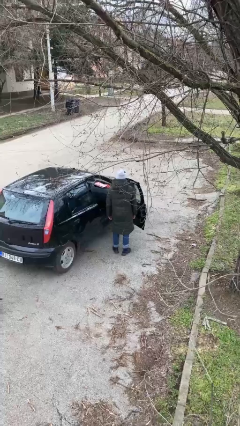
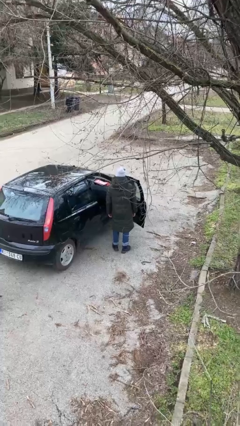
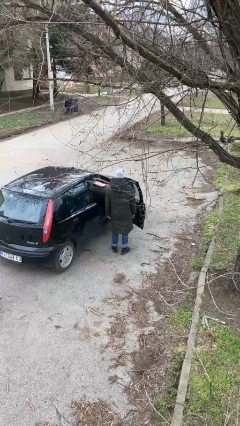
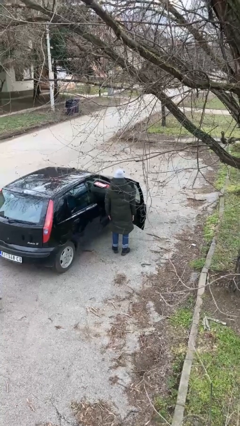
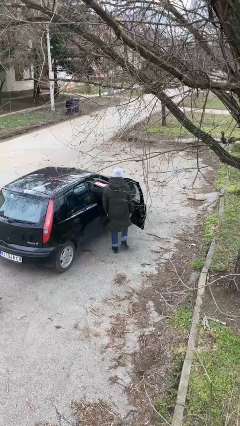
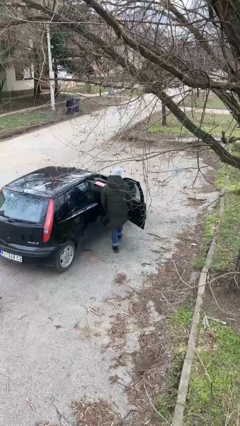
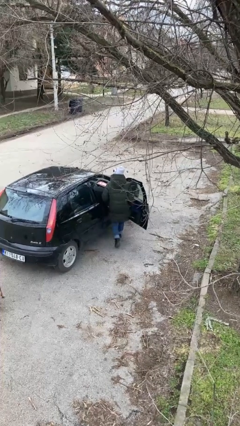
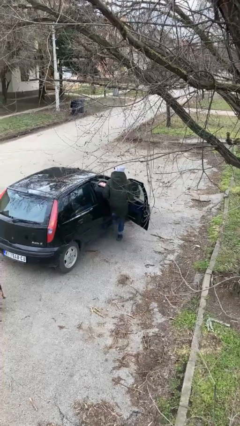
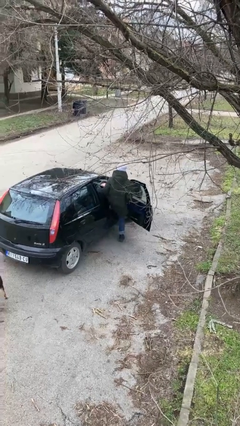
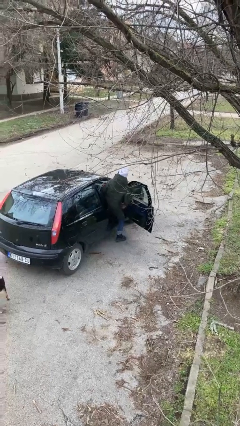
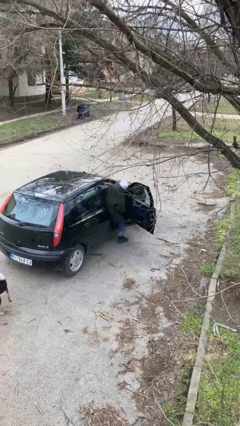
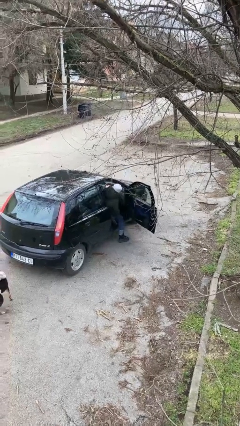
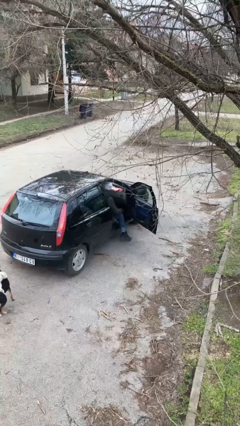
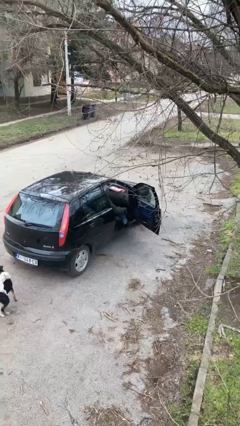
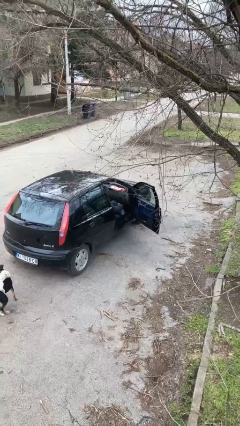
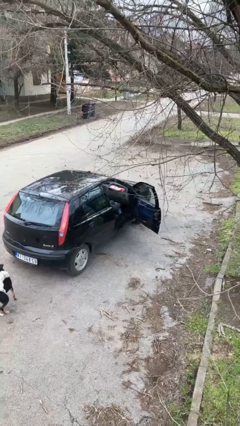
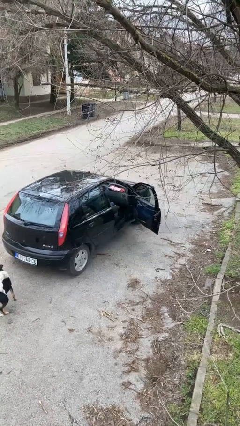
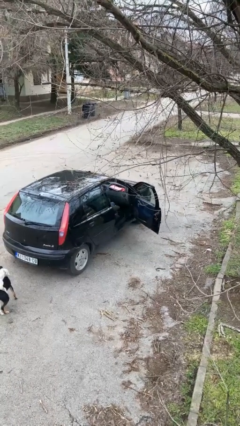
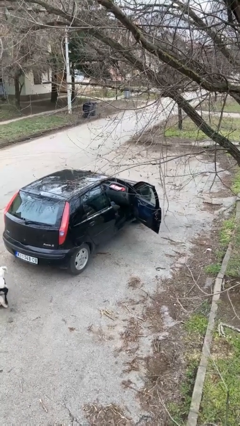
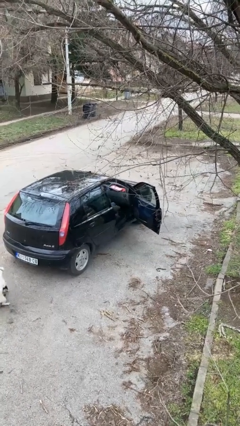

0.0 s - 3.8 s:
person enters car

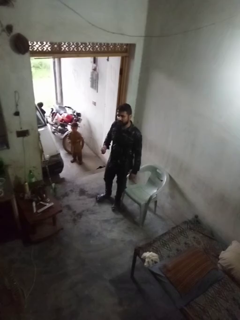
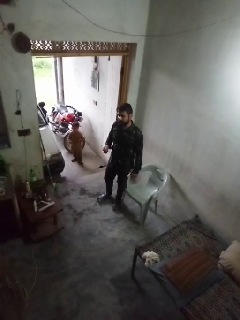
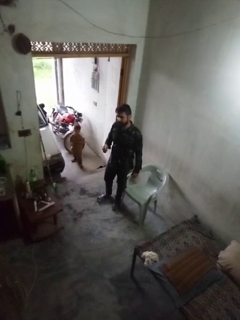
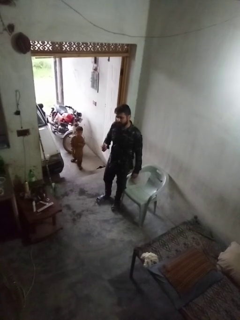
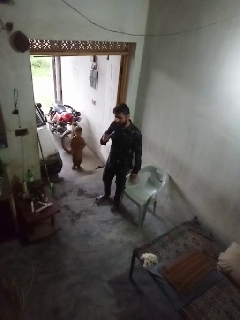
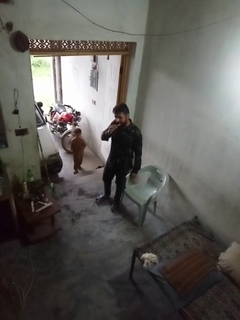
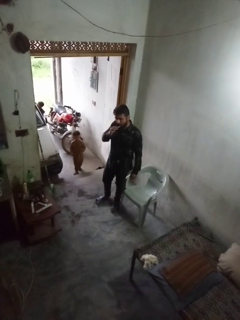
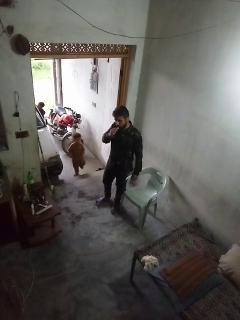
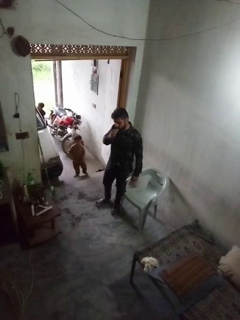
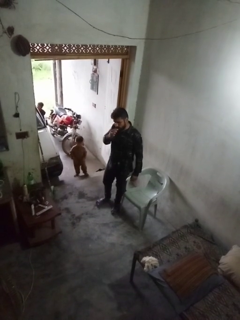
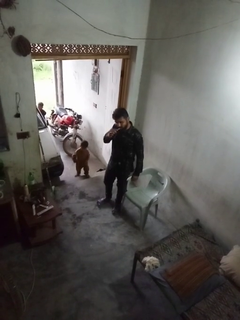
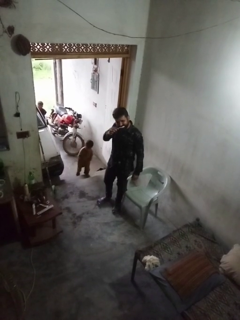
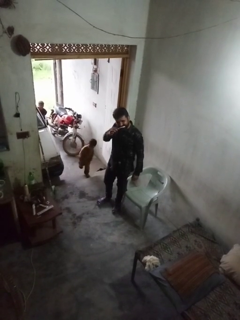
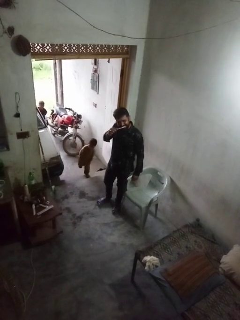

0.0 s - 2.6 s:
person brushes teeth

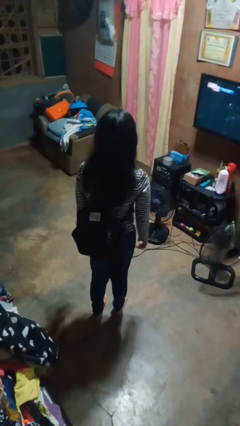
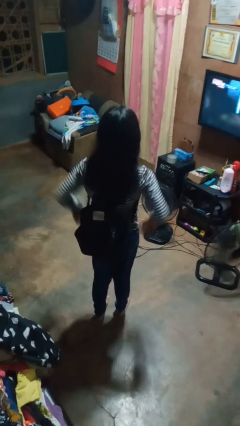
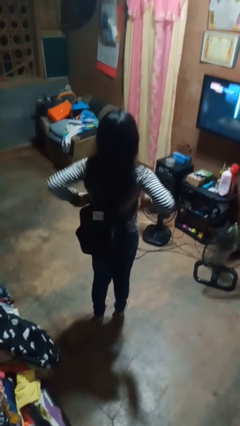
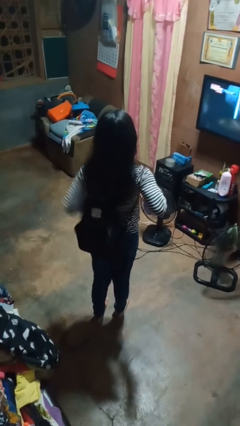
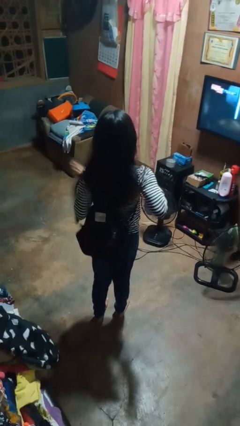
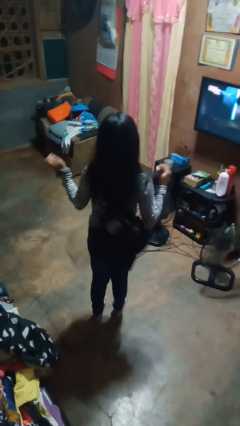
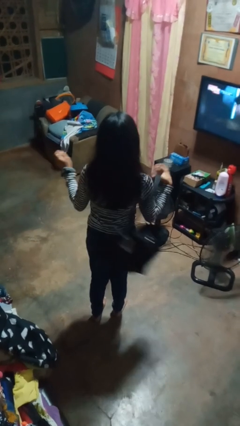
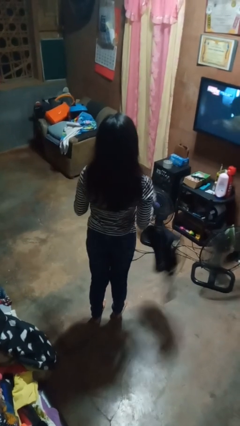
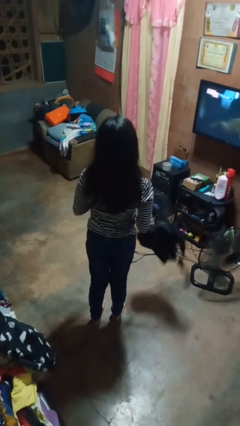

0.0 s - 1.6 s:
person takes off backpack

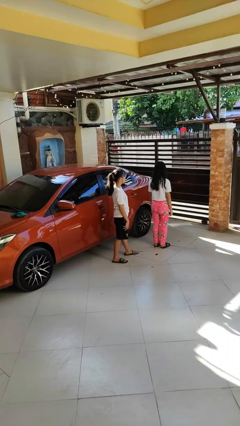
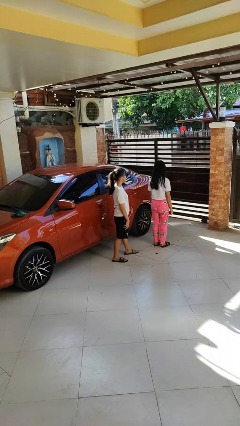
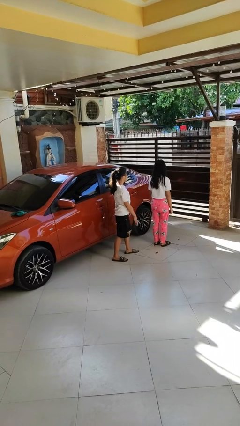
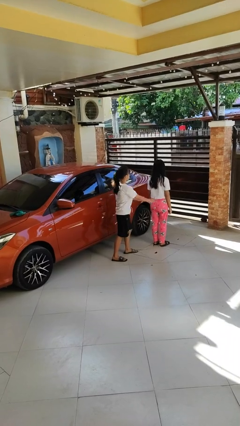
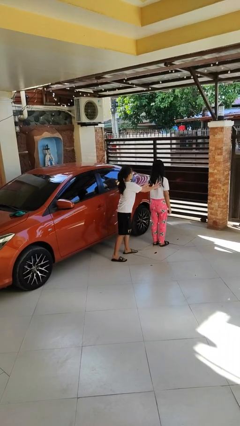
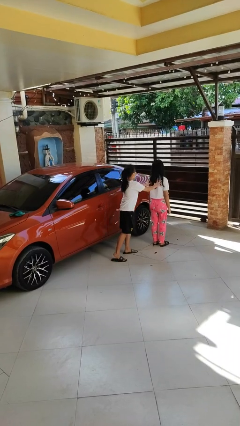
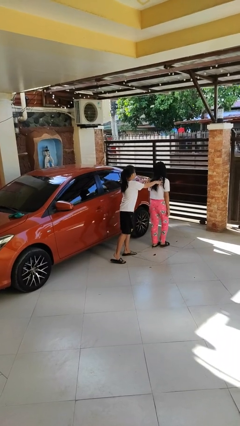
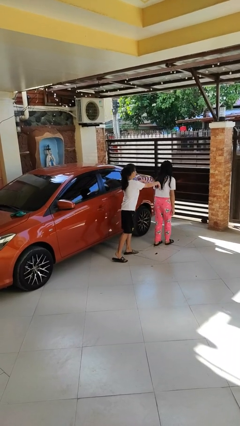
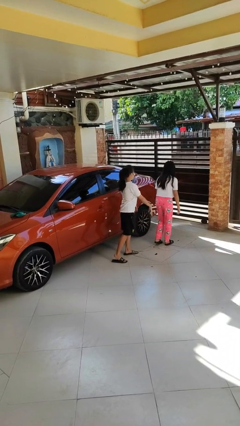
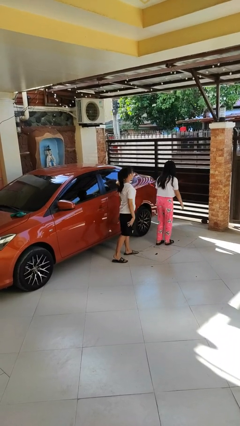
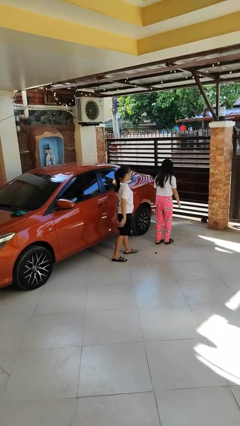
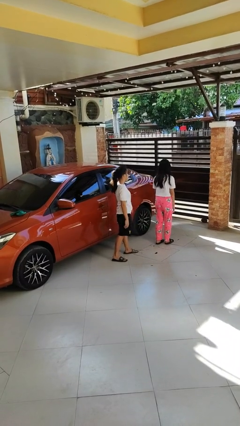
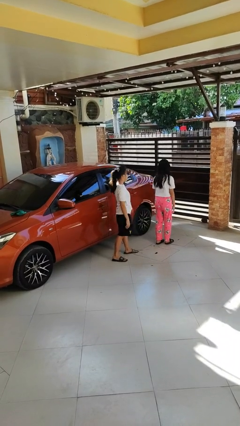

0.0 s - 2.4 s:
person shoves person

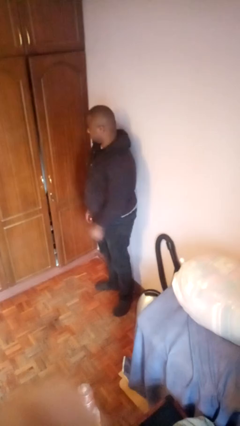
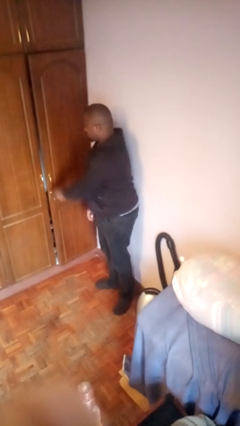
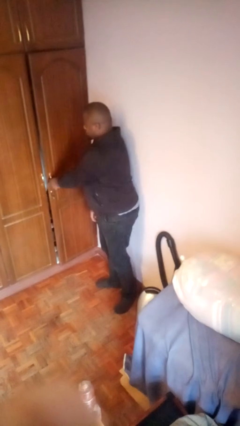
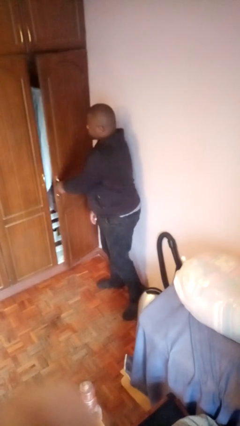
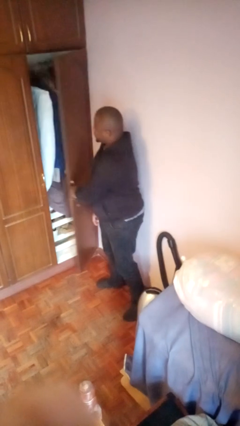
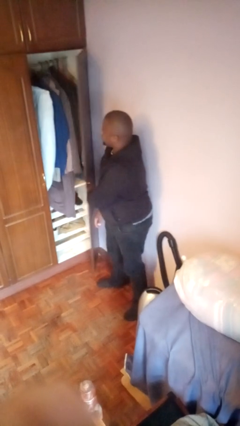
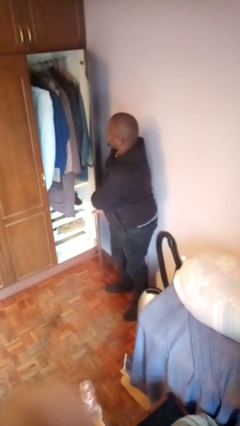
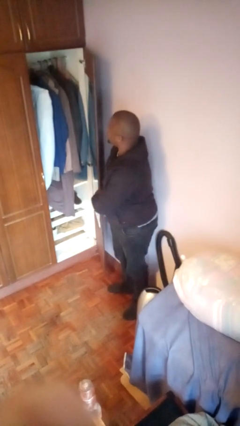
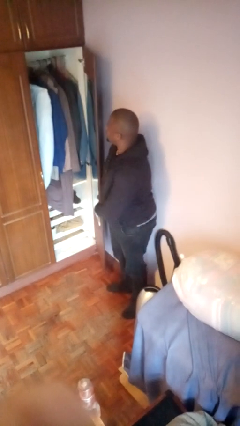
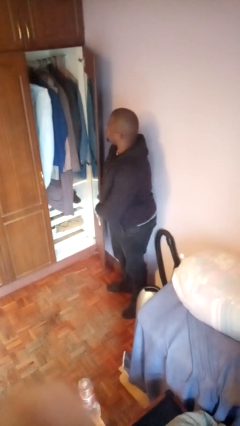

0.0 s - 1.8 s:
person opens closet door

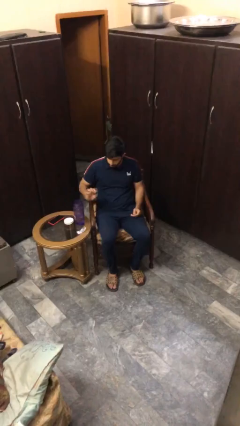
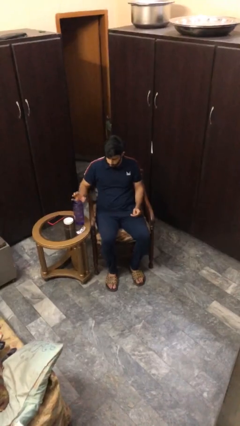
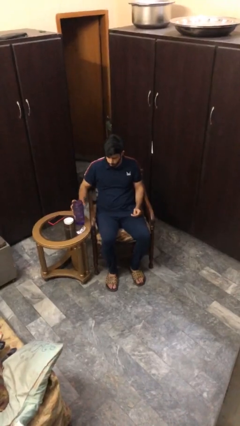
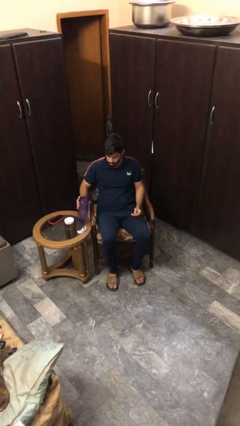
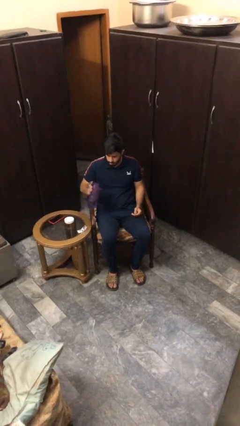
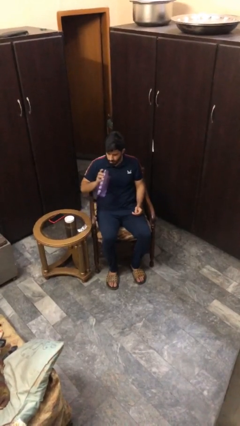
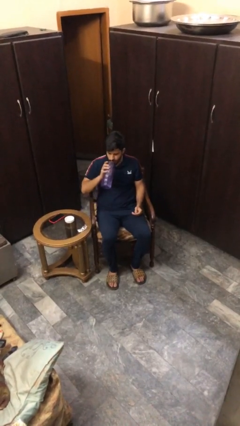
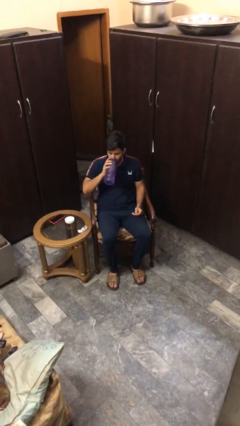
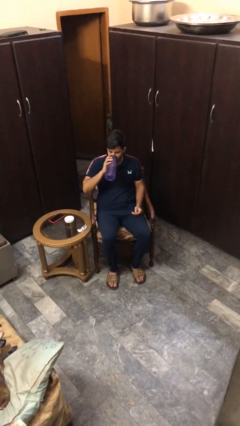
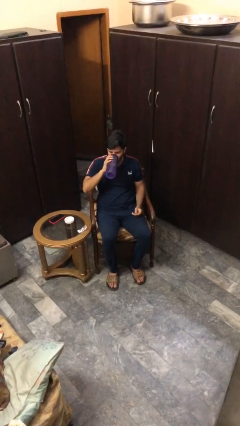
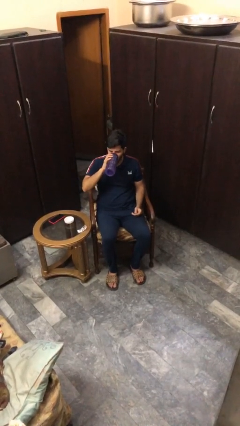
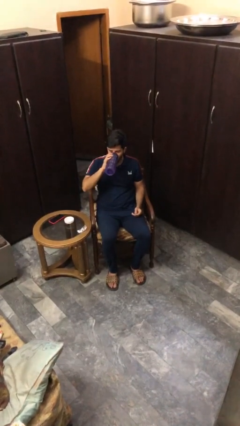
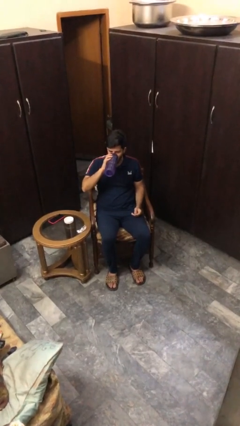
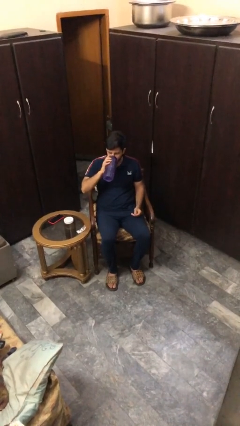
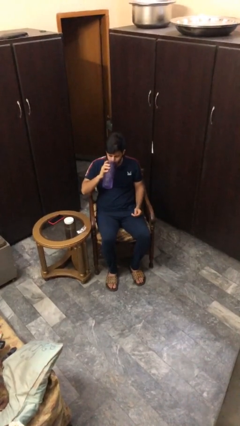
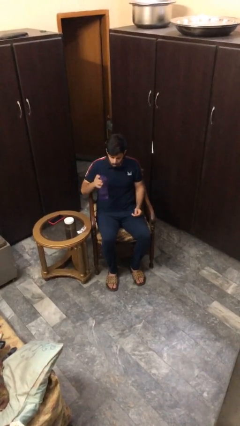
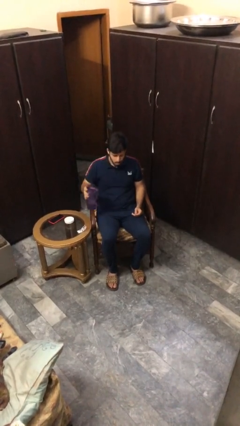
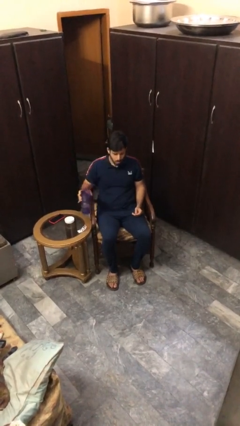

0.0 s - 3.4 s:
person drinks from cup

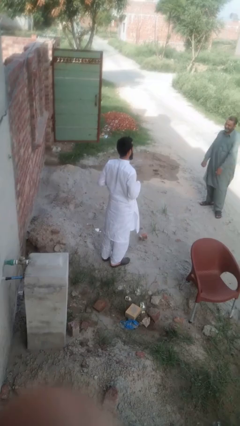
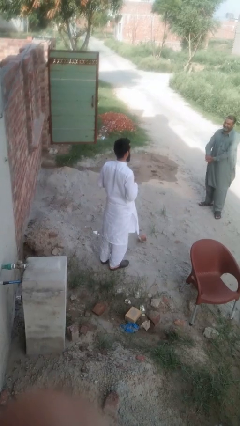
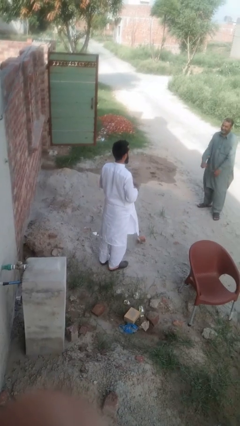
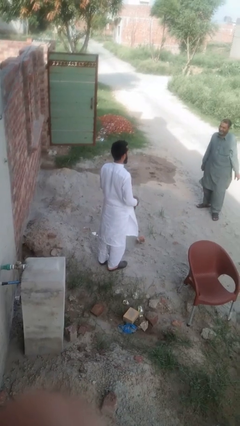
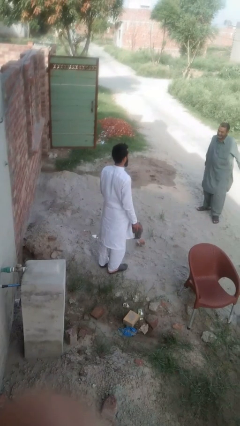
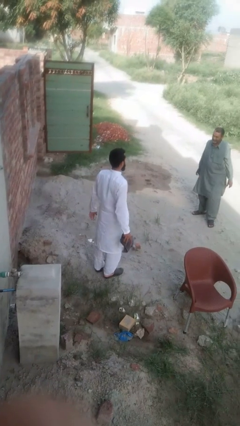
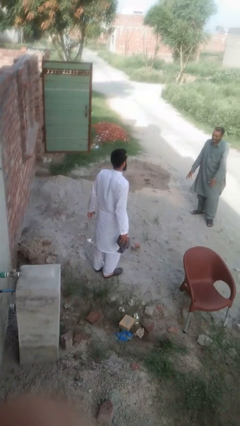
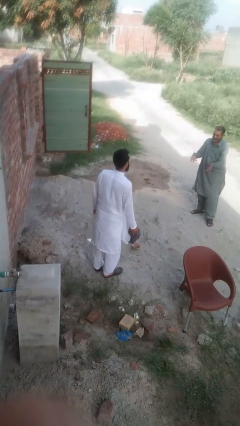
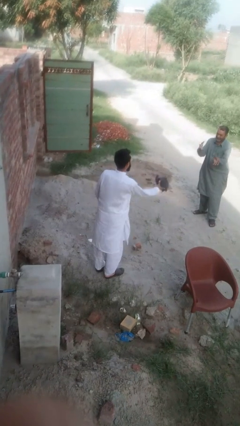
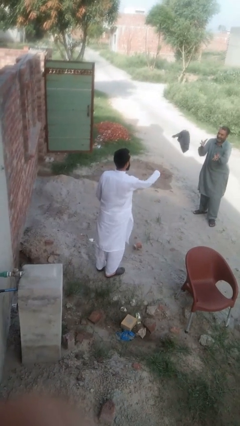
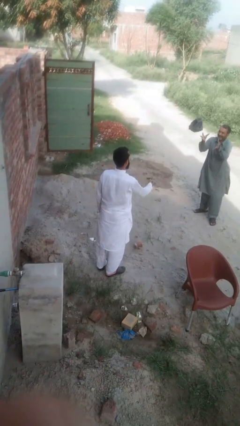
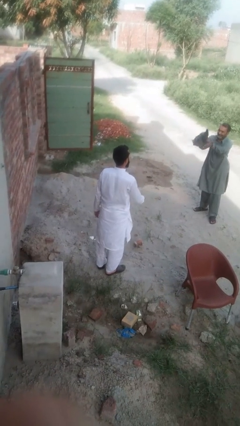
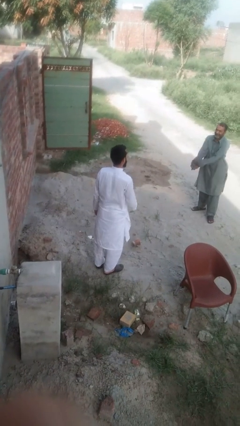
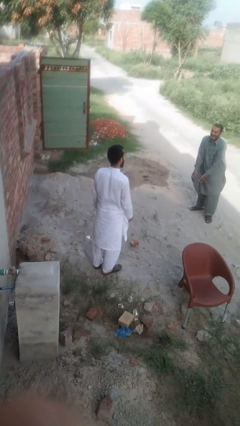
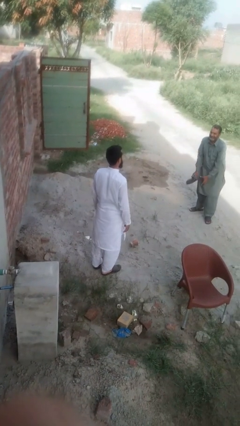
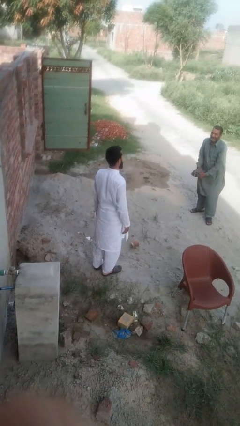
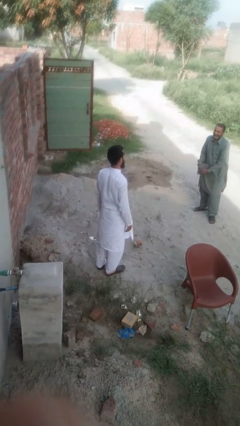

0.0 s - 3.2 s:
person throws object to person
